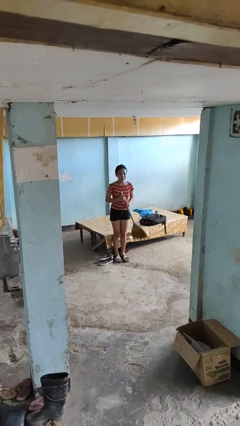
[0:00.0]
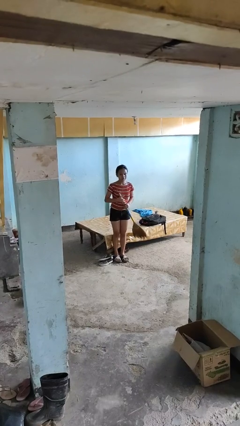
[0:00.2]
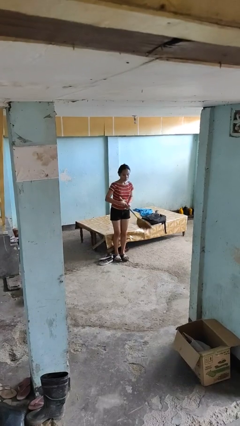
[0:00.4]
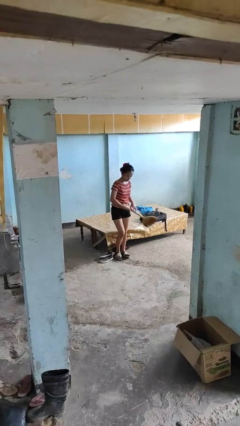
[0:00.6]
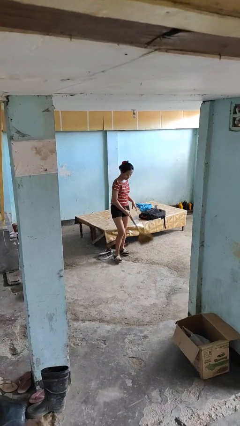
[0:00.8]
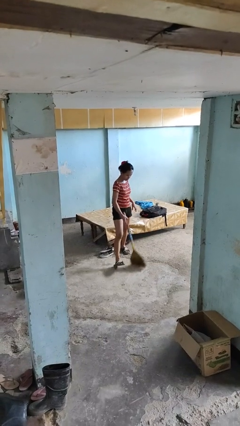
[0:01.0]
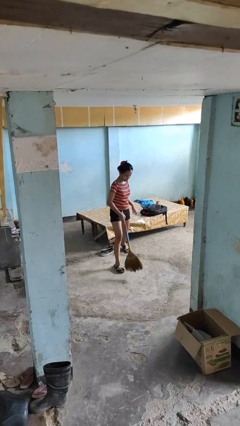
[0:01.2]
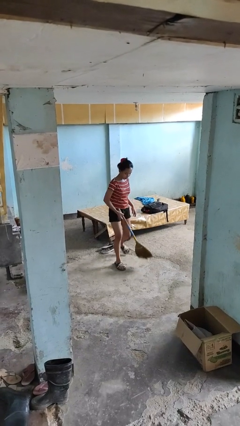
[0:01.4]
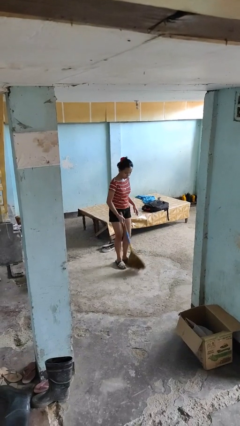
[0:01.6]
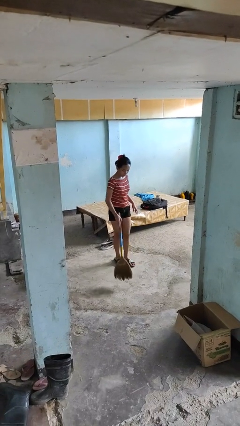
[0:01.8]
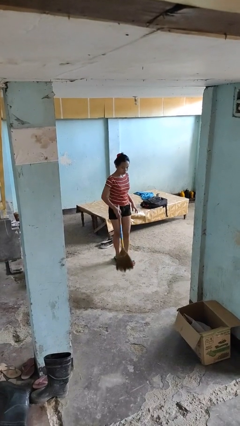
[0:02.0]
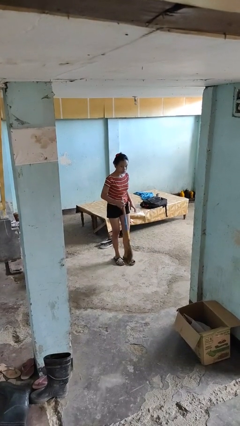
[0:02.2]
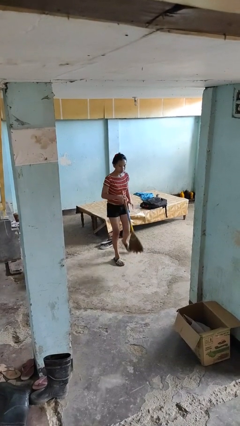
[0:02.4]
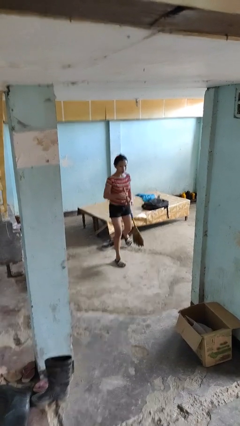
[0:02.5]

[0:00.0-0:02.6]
person sweeps floor

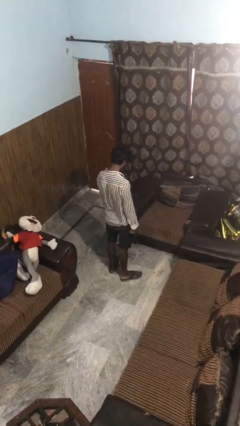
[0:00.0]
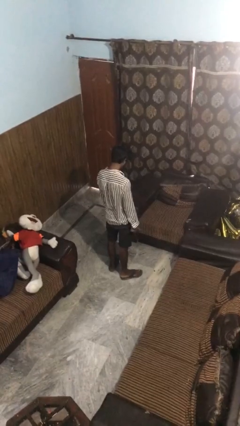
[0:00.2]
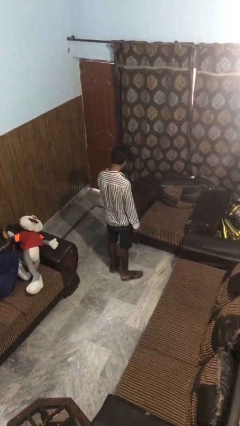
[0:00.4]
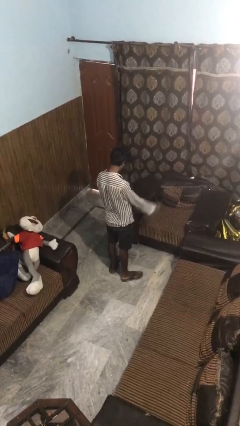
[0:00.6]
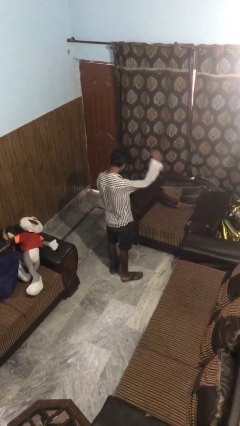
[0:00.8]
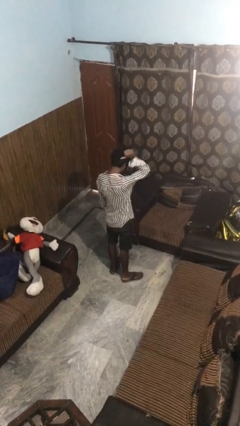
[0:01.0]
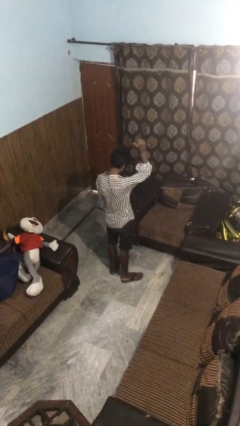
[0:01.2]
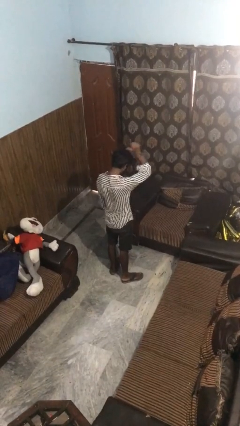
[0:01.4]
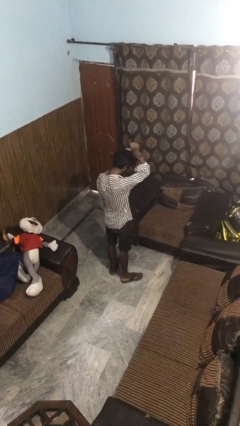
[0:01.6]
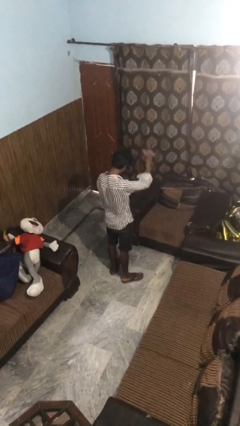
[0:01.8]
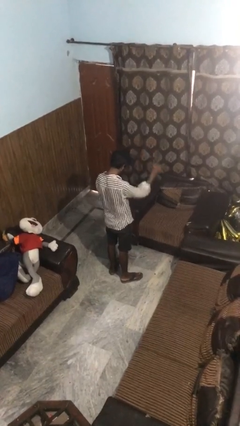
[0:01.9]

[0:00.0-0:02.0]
person gestures behind me

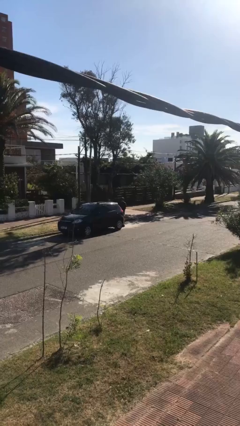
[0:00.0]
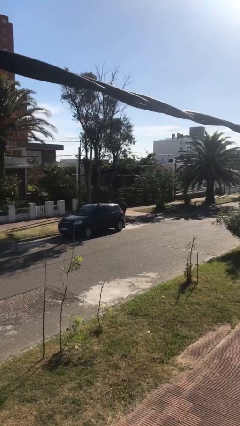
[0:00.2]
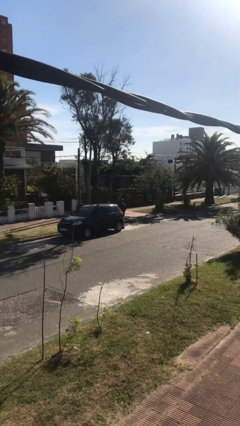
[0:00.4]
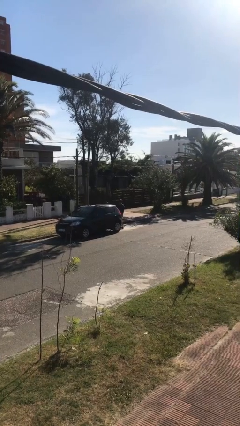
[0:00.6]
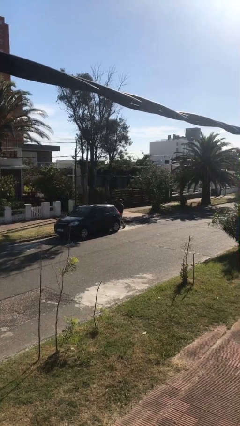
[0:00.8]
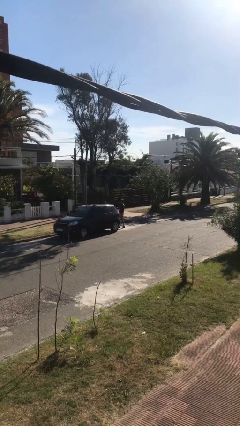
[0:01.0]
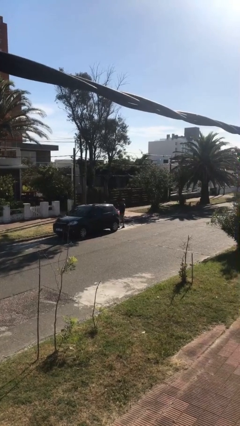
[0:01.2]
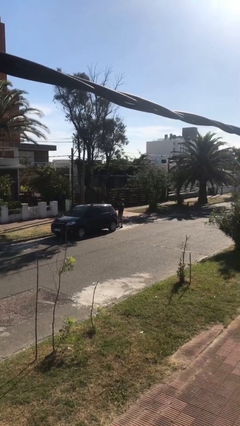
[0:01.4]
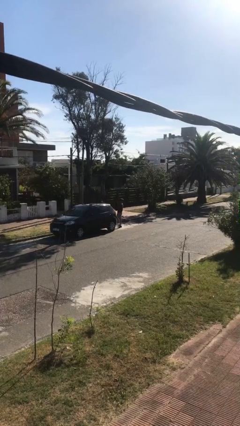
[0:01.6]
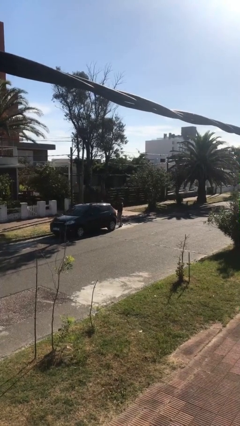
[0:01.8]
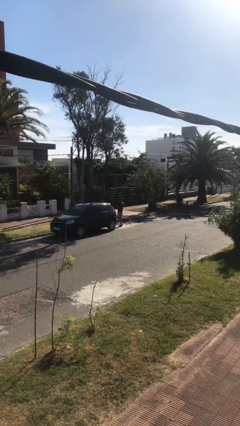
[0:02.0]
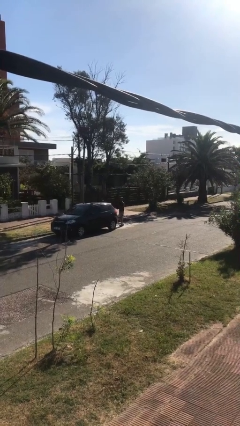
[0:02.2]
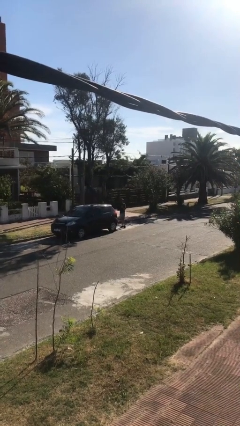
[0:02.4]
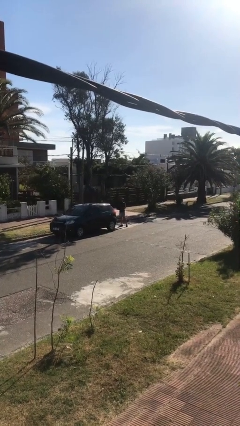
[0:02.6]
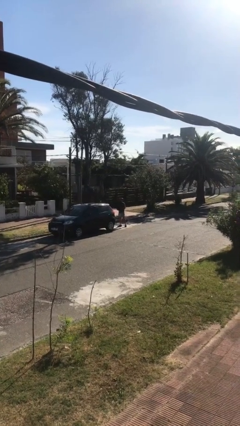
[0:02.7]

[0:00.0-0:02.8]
person unloads car

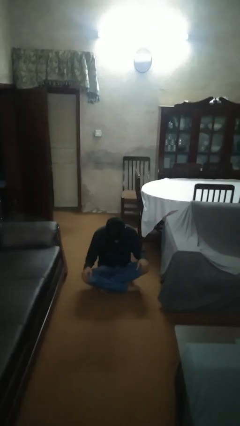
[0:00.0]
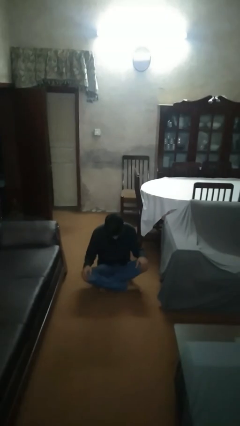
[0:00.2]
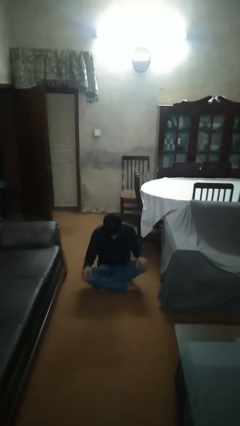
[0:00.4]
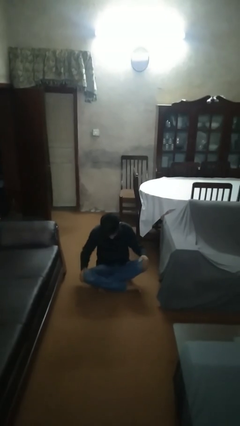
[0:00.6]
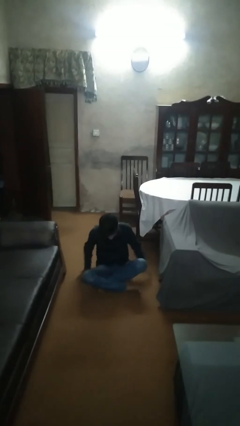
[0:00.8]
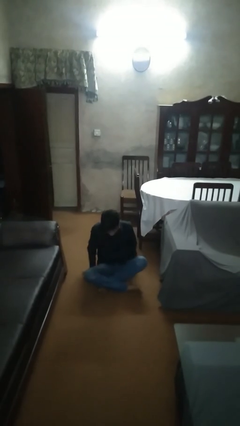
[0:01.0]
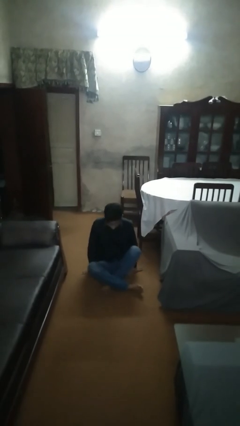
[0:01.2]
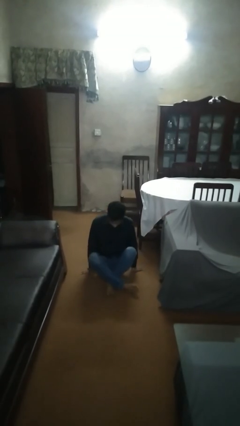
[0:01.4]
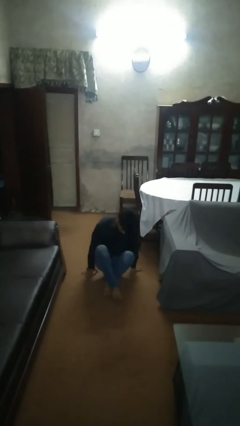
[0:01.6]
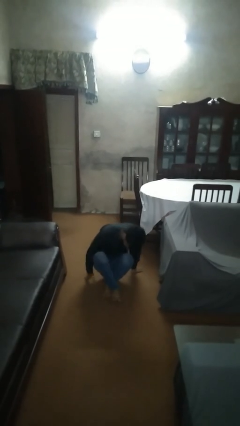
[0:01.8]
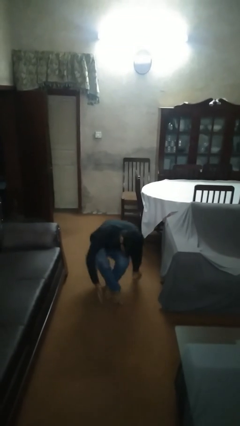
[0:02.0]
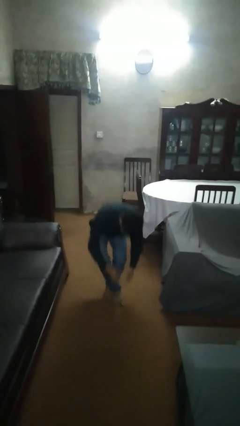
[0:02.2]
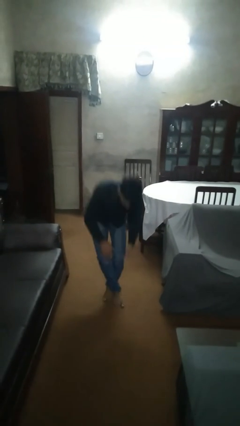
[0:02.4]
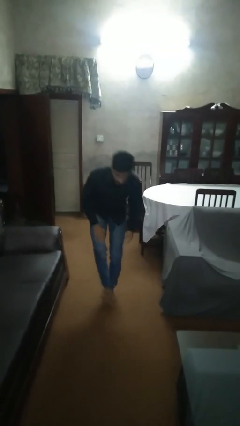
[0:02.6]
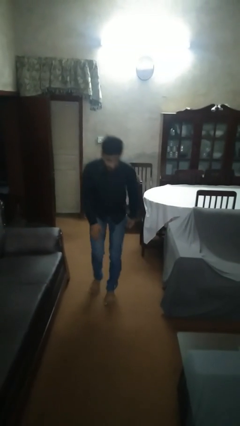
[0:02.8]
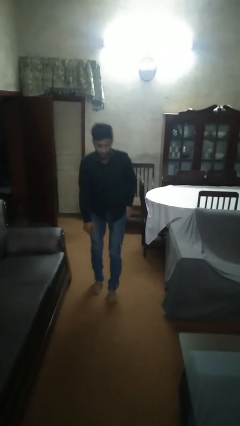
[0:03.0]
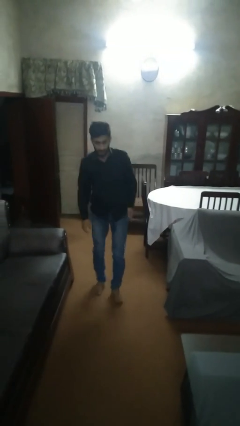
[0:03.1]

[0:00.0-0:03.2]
person stands up from floor

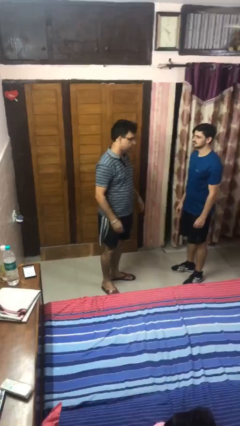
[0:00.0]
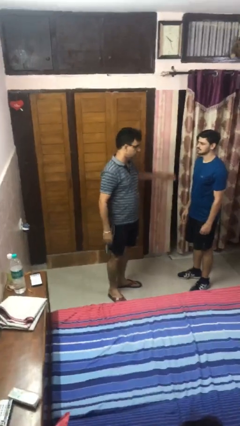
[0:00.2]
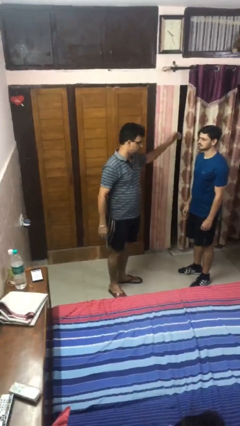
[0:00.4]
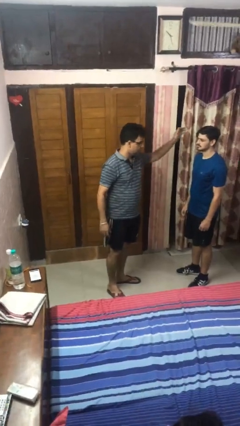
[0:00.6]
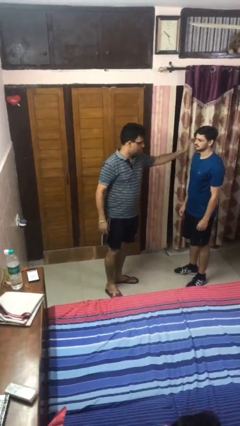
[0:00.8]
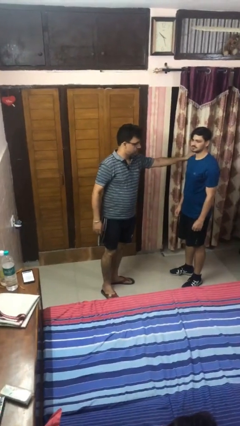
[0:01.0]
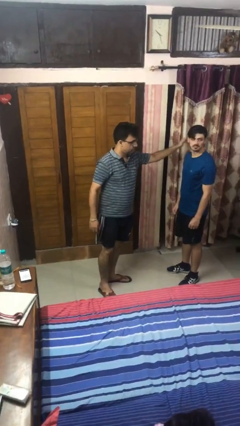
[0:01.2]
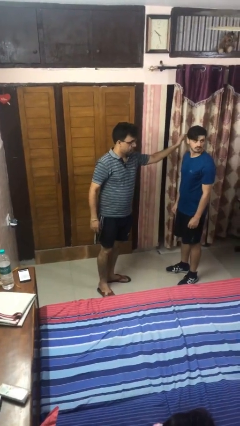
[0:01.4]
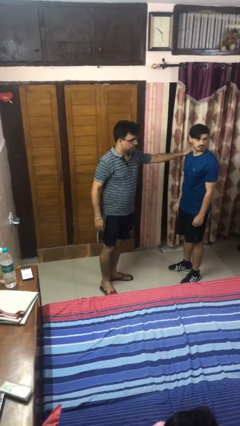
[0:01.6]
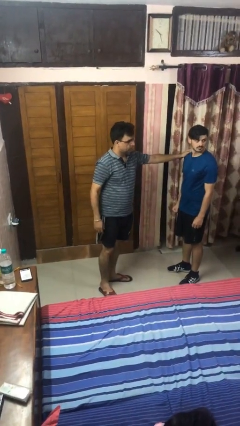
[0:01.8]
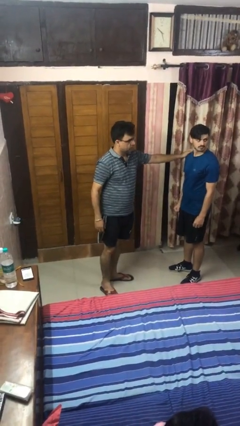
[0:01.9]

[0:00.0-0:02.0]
person pounds shoulders of person

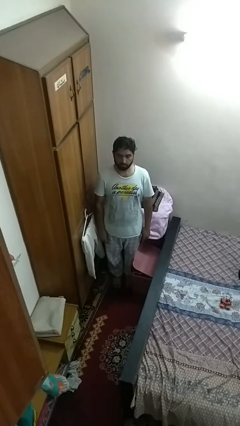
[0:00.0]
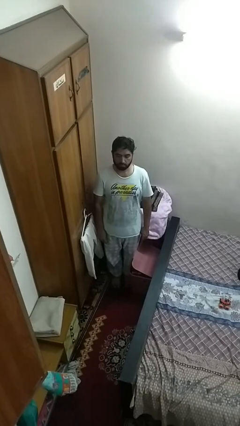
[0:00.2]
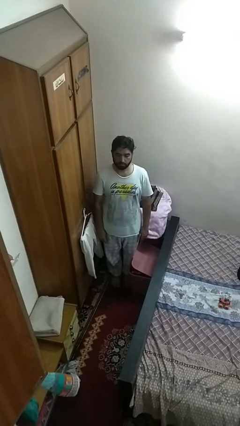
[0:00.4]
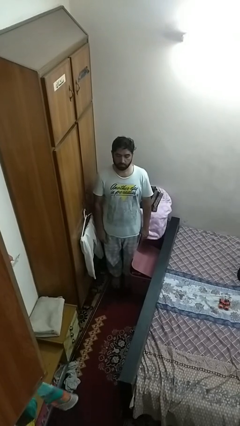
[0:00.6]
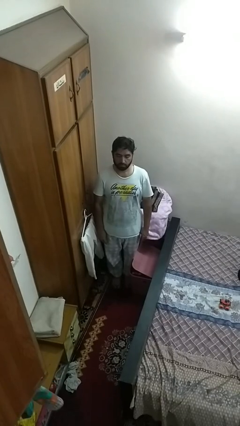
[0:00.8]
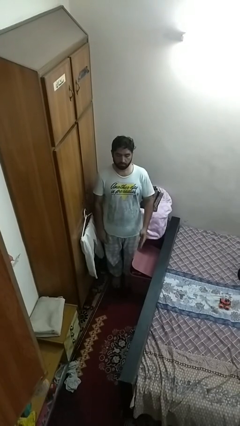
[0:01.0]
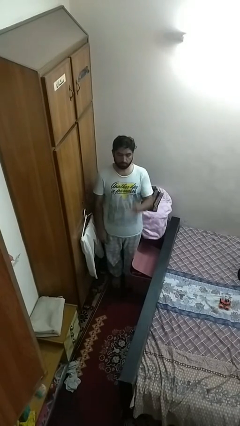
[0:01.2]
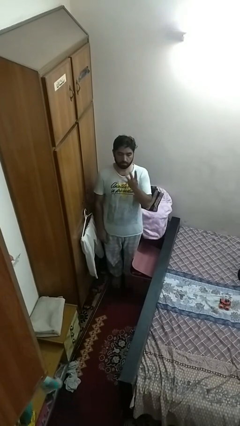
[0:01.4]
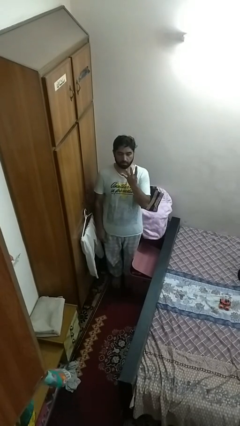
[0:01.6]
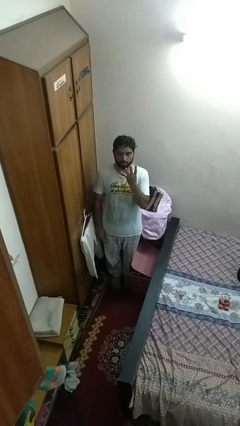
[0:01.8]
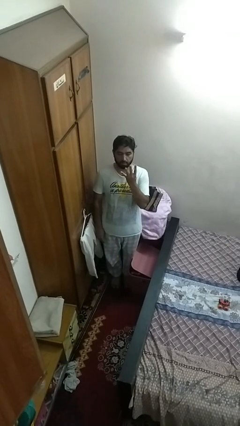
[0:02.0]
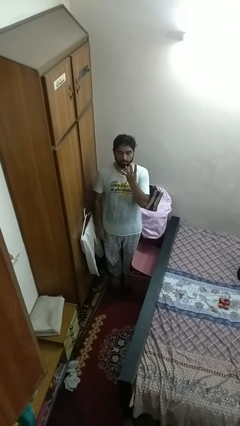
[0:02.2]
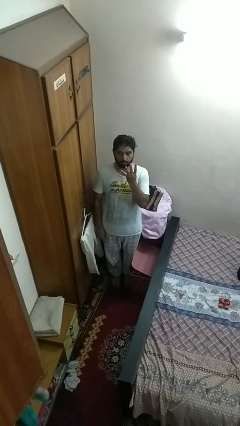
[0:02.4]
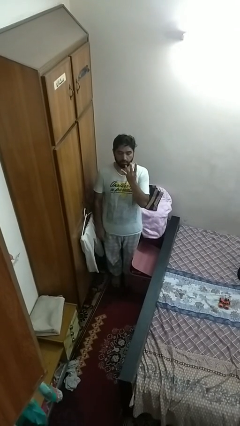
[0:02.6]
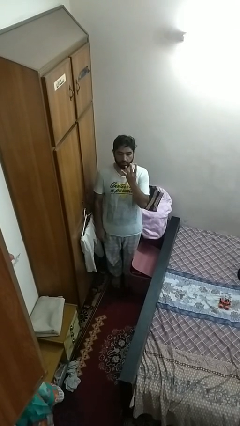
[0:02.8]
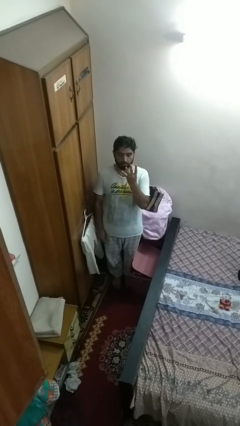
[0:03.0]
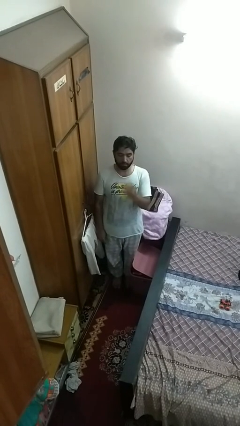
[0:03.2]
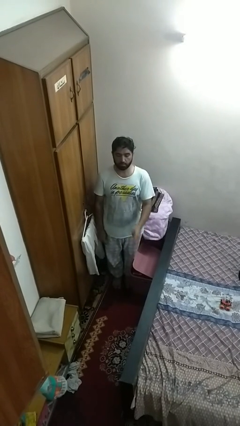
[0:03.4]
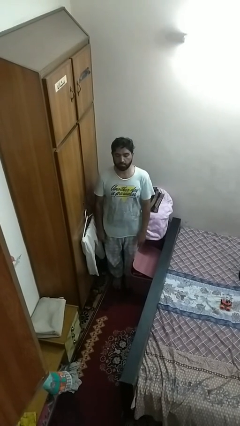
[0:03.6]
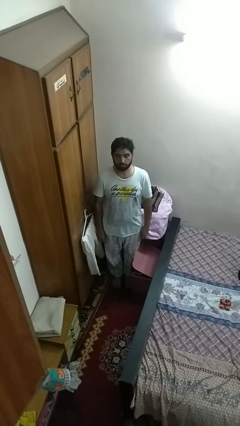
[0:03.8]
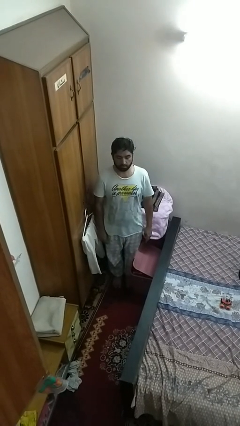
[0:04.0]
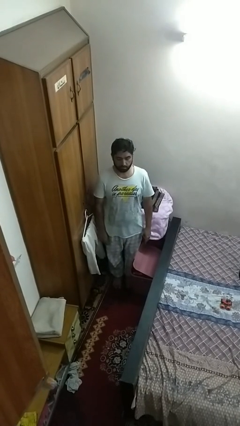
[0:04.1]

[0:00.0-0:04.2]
person gestures number four

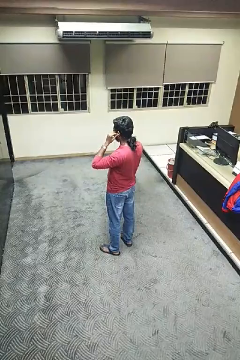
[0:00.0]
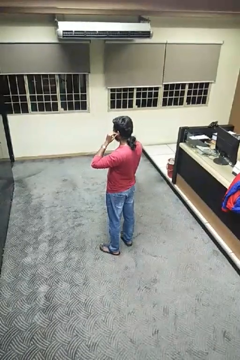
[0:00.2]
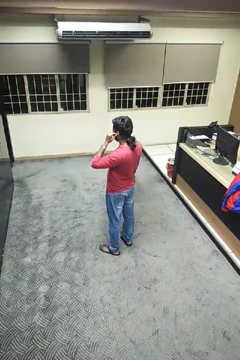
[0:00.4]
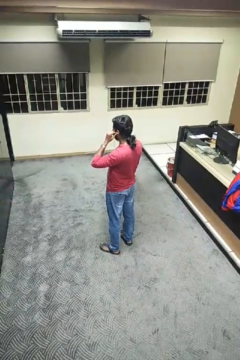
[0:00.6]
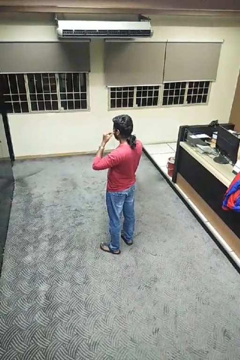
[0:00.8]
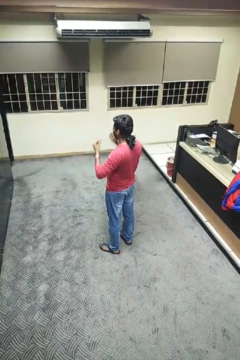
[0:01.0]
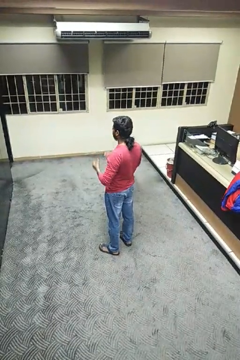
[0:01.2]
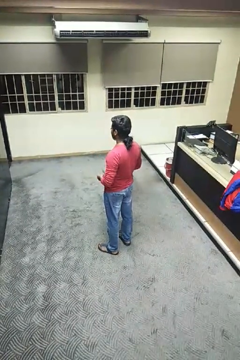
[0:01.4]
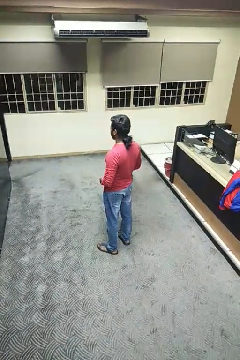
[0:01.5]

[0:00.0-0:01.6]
person takes off headphones
